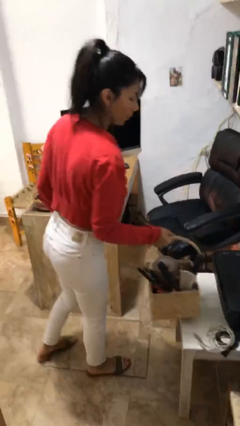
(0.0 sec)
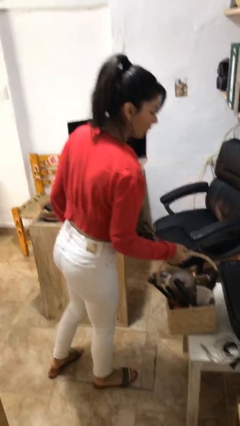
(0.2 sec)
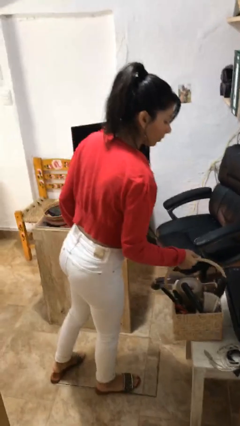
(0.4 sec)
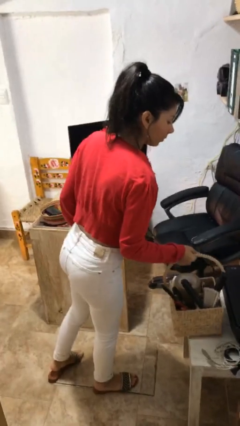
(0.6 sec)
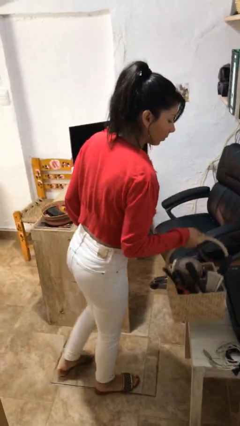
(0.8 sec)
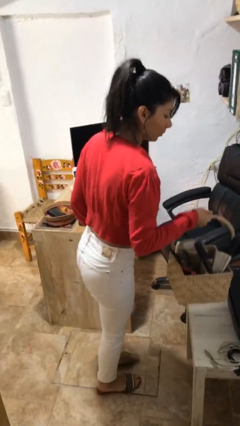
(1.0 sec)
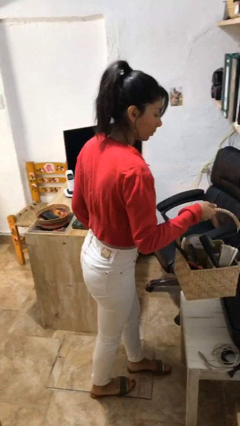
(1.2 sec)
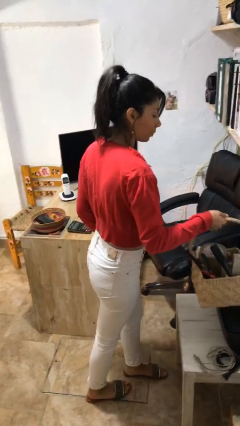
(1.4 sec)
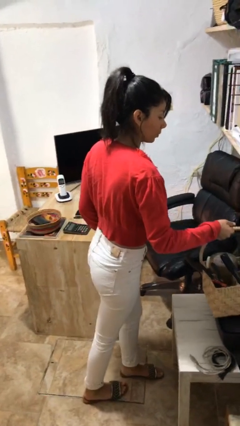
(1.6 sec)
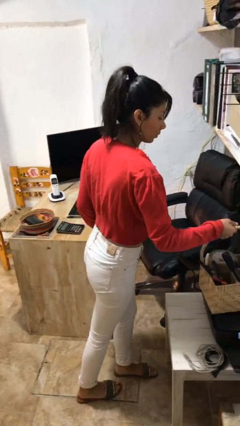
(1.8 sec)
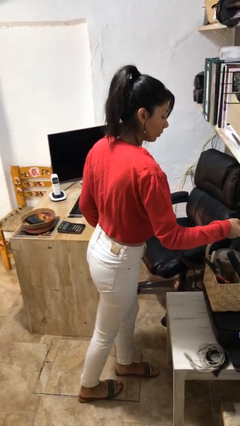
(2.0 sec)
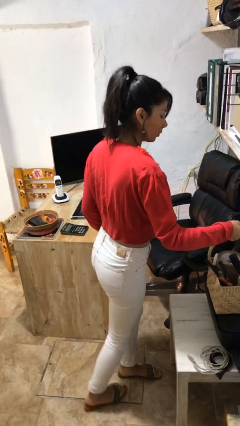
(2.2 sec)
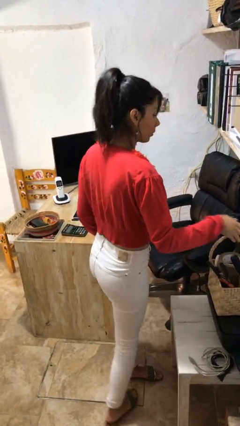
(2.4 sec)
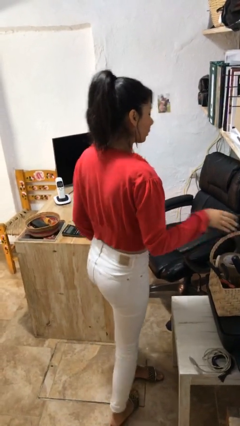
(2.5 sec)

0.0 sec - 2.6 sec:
person puts down object on table

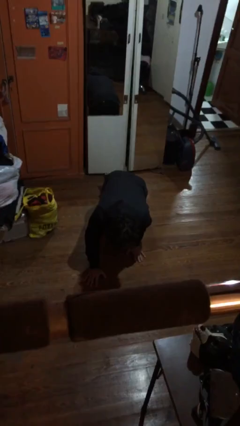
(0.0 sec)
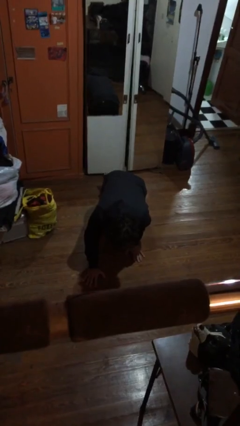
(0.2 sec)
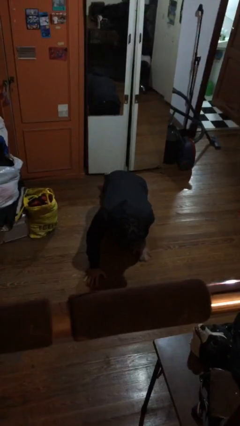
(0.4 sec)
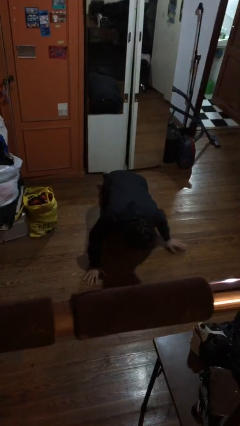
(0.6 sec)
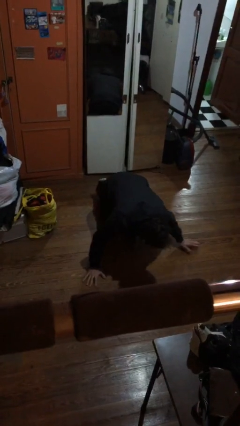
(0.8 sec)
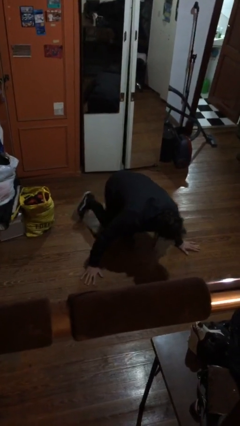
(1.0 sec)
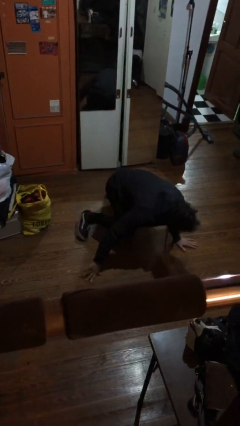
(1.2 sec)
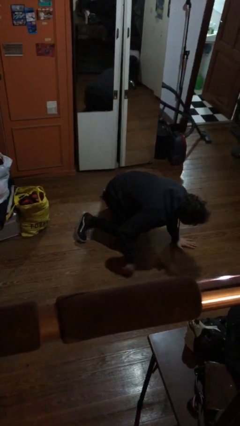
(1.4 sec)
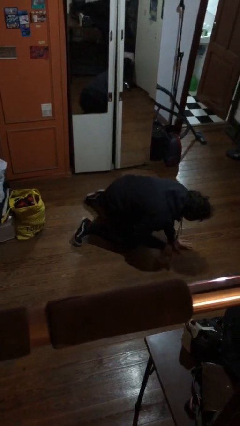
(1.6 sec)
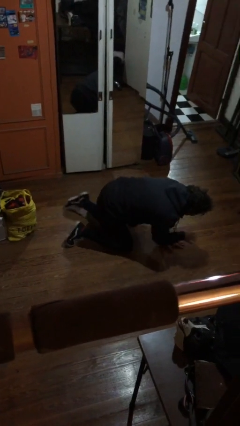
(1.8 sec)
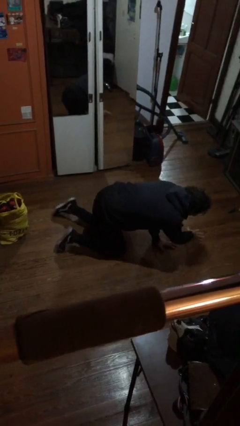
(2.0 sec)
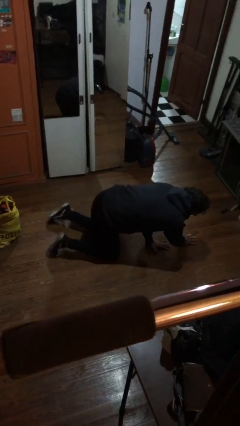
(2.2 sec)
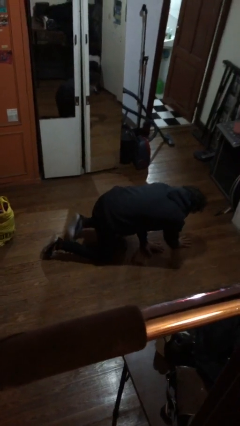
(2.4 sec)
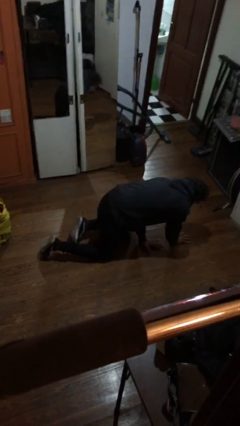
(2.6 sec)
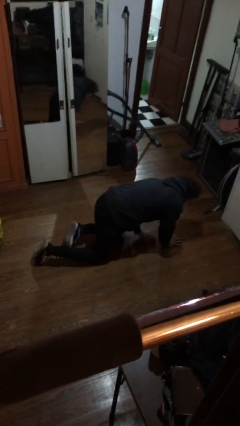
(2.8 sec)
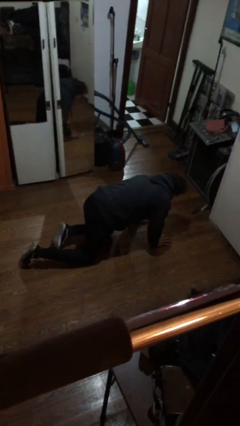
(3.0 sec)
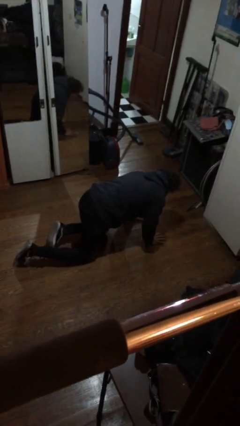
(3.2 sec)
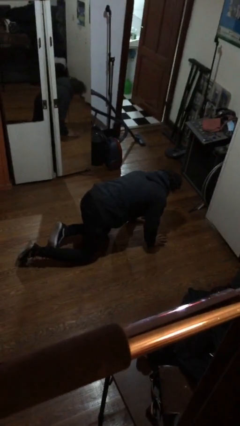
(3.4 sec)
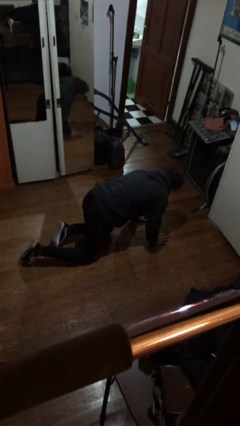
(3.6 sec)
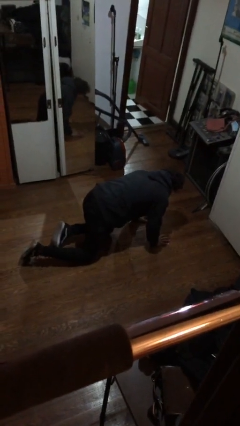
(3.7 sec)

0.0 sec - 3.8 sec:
person crawls

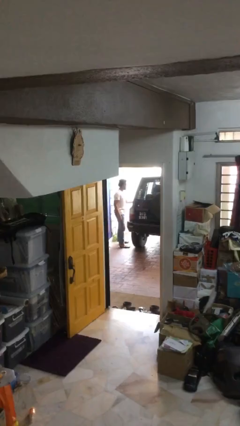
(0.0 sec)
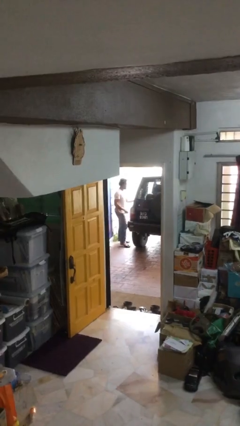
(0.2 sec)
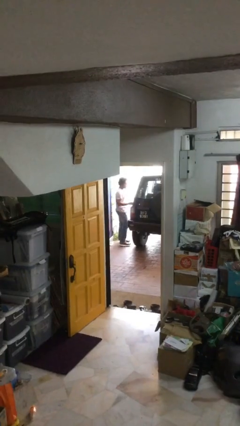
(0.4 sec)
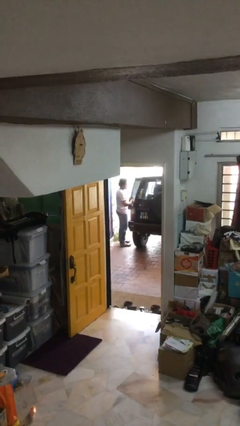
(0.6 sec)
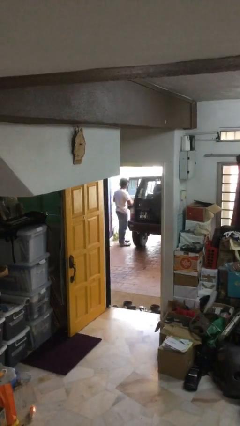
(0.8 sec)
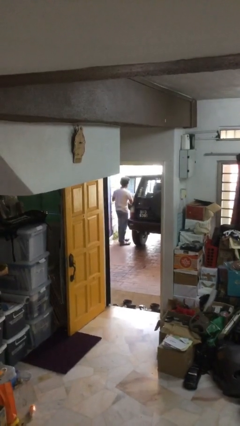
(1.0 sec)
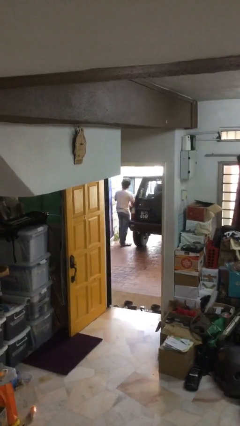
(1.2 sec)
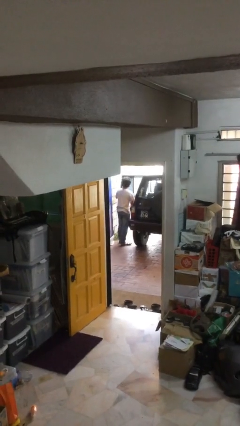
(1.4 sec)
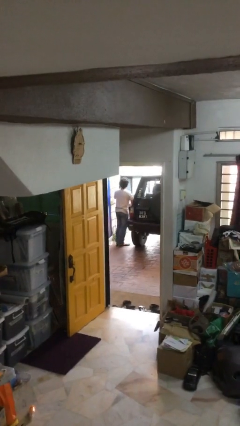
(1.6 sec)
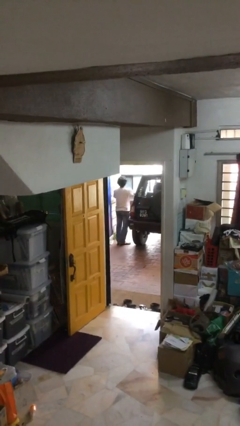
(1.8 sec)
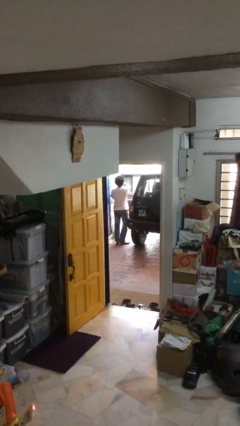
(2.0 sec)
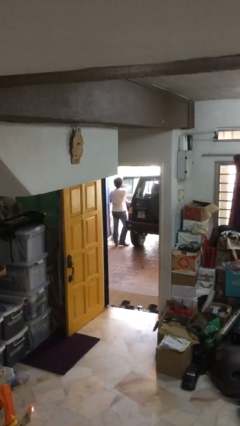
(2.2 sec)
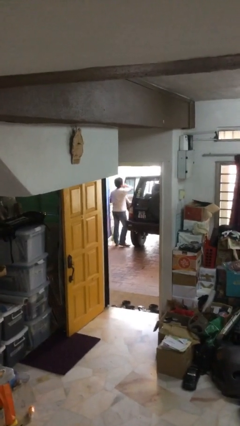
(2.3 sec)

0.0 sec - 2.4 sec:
person opens car door

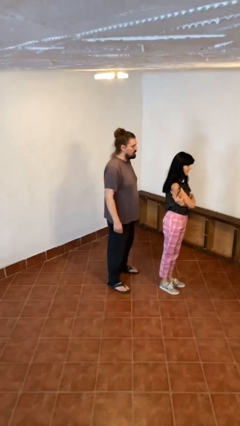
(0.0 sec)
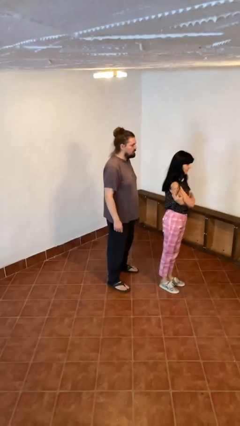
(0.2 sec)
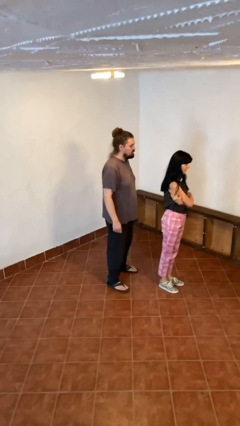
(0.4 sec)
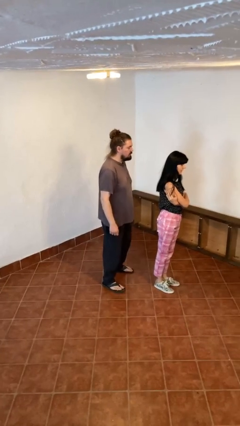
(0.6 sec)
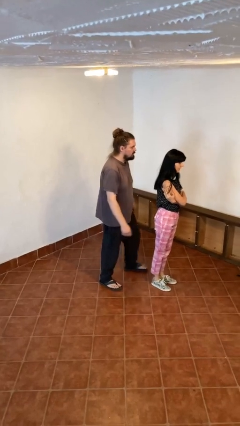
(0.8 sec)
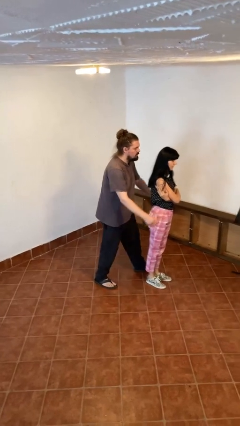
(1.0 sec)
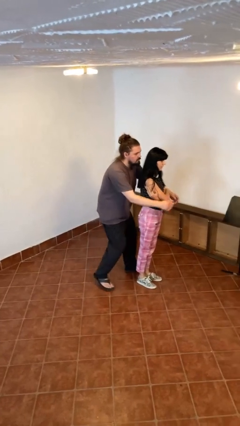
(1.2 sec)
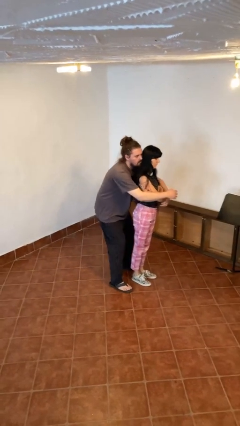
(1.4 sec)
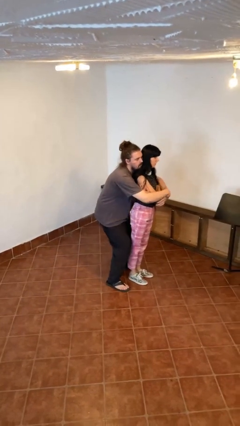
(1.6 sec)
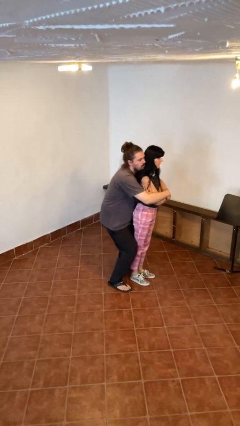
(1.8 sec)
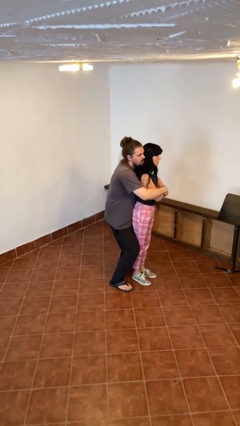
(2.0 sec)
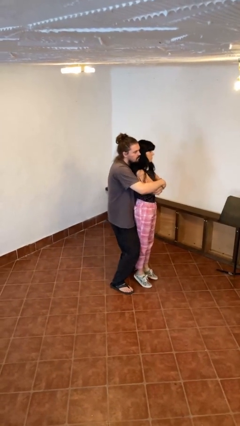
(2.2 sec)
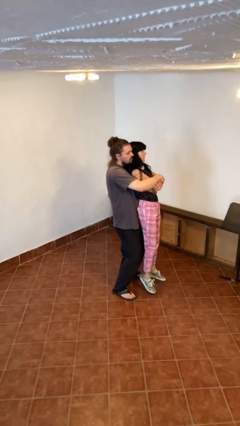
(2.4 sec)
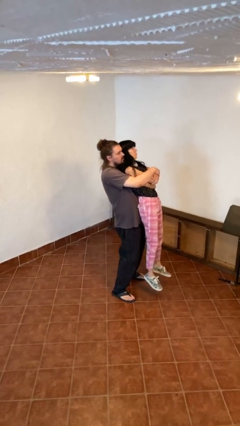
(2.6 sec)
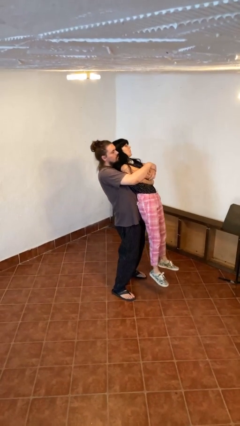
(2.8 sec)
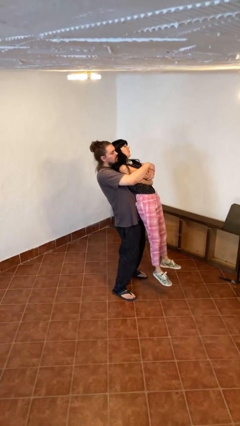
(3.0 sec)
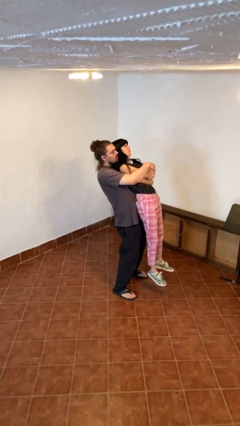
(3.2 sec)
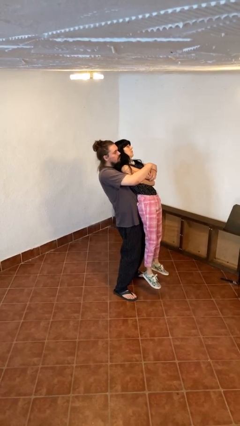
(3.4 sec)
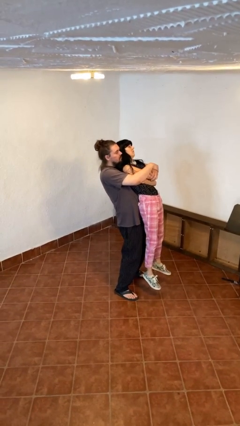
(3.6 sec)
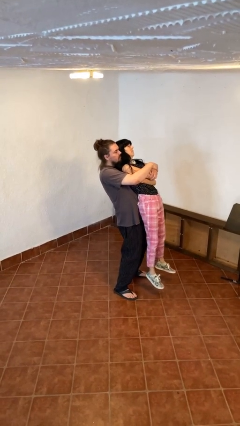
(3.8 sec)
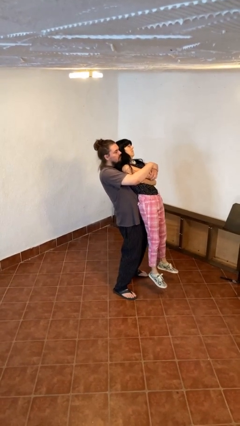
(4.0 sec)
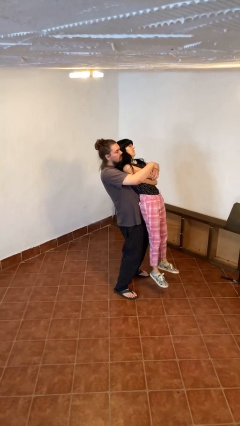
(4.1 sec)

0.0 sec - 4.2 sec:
person picks up person

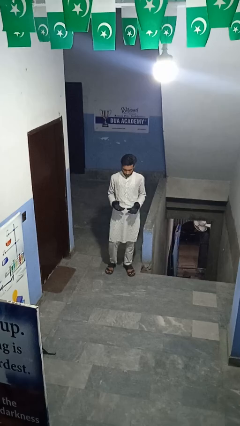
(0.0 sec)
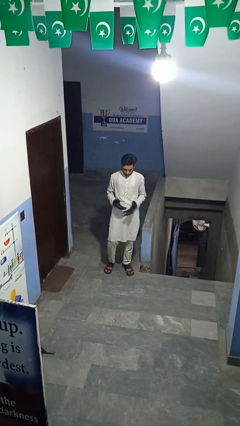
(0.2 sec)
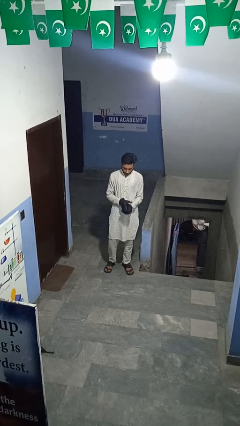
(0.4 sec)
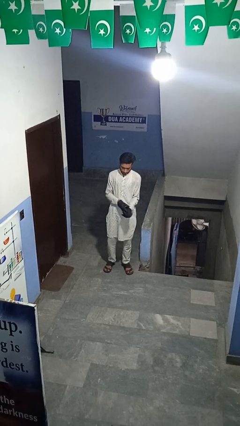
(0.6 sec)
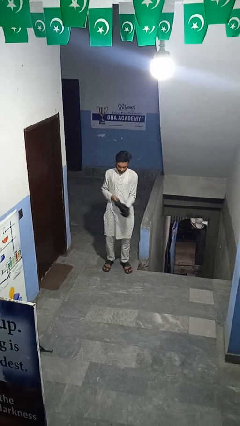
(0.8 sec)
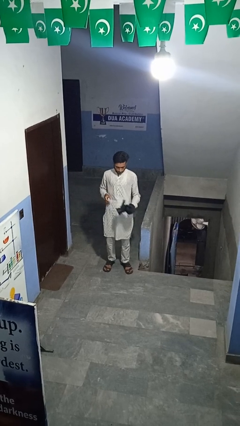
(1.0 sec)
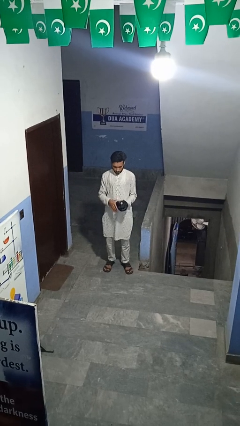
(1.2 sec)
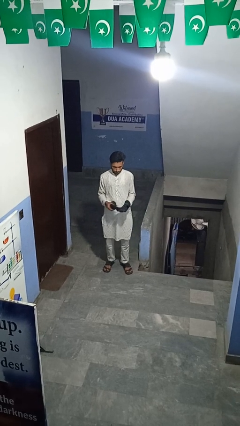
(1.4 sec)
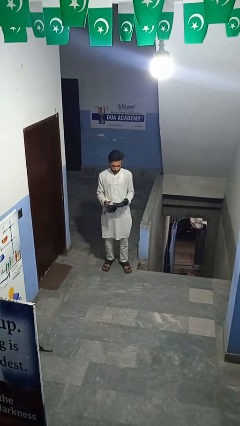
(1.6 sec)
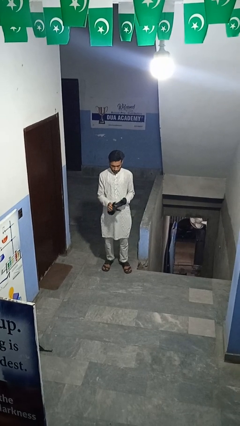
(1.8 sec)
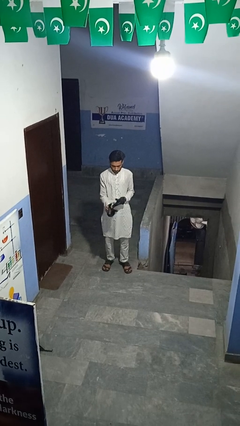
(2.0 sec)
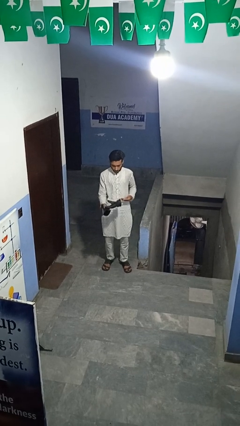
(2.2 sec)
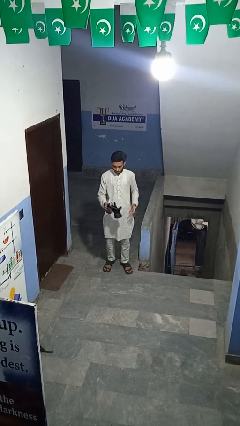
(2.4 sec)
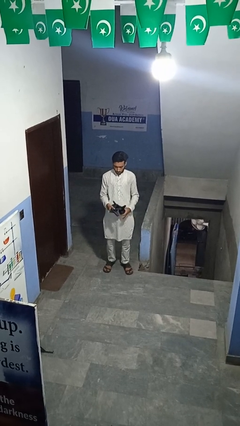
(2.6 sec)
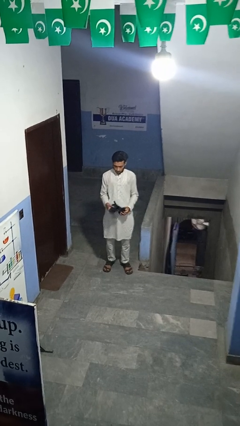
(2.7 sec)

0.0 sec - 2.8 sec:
person takes off gloves

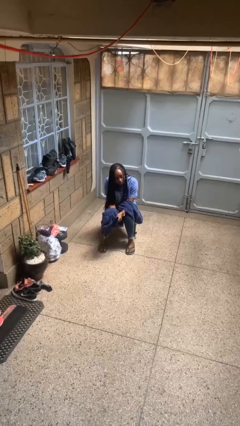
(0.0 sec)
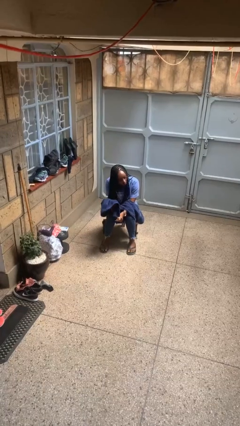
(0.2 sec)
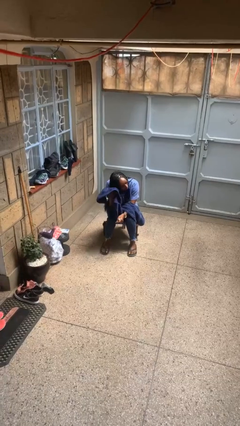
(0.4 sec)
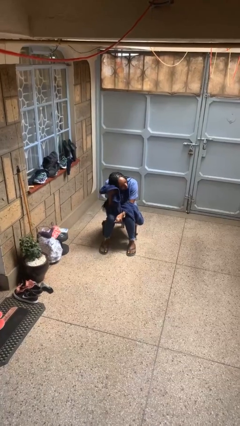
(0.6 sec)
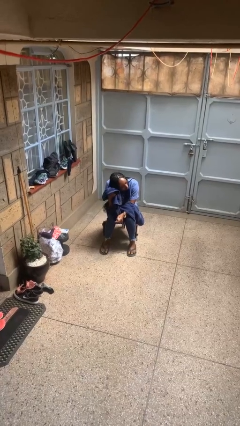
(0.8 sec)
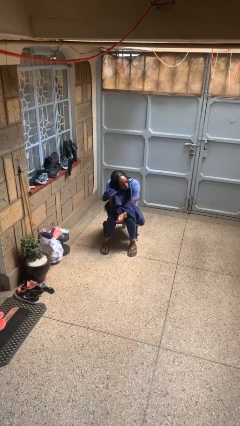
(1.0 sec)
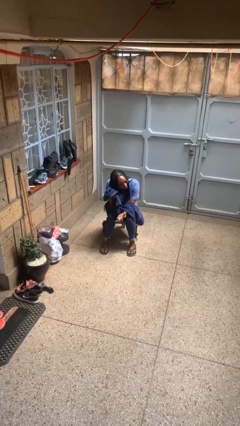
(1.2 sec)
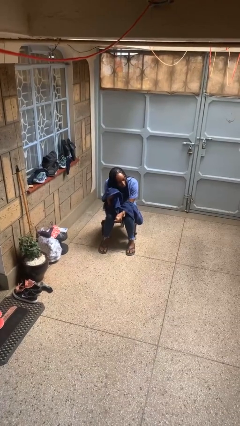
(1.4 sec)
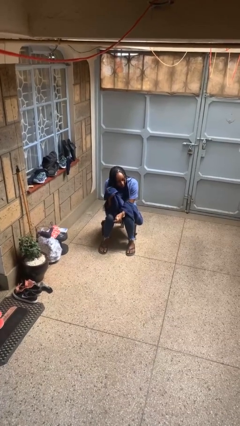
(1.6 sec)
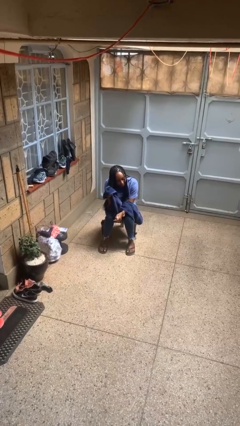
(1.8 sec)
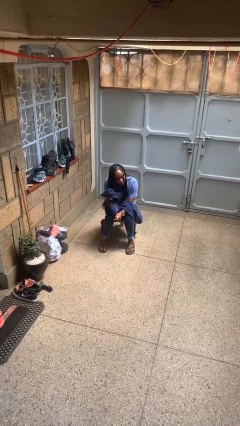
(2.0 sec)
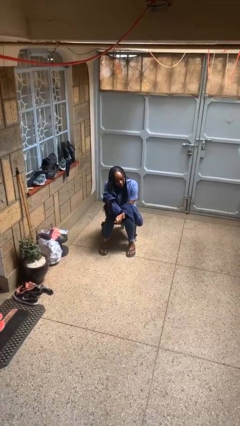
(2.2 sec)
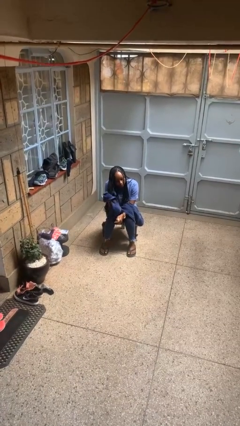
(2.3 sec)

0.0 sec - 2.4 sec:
person dries hair with towel
